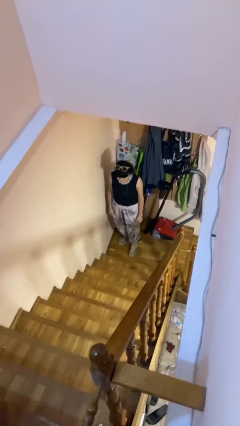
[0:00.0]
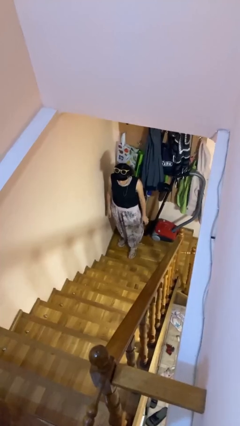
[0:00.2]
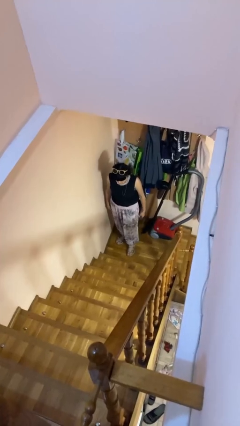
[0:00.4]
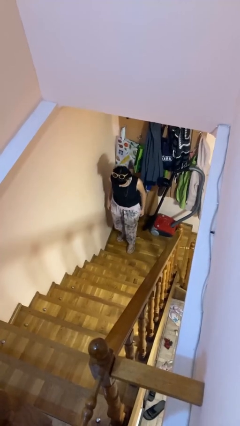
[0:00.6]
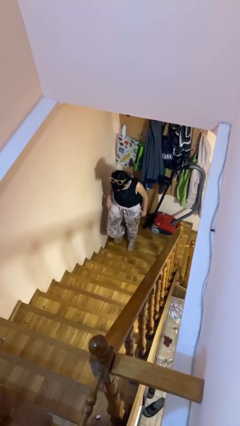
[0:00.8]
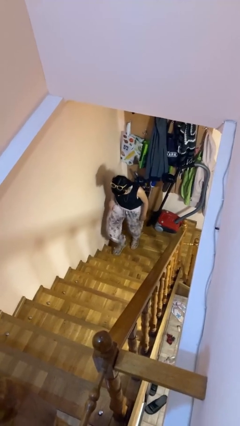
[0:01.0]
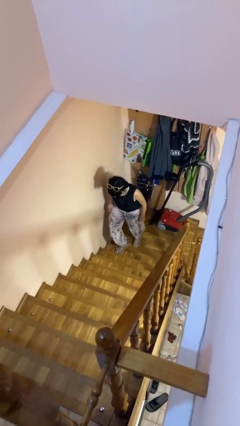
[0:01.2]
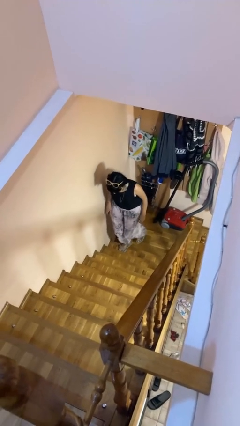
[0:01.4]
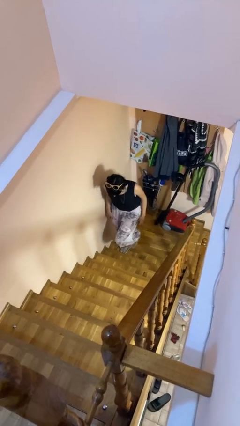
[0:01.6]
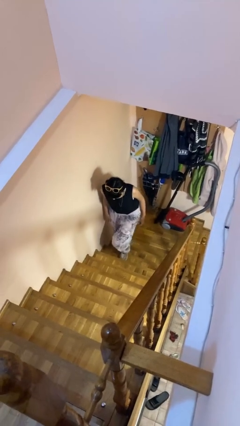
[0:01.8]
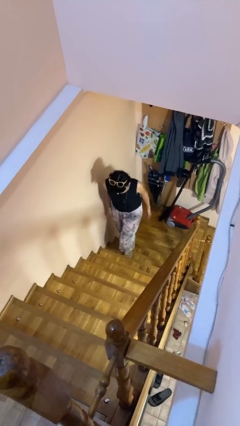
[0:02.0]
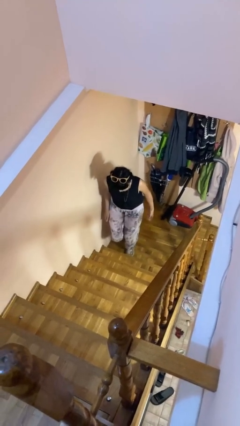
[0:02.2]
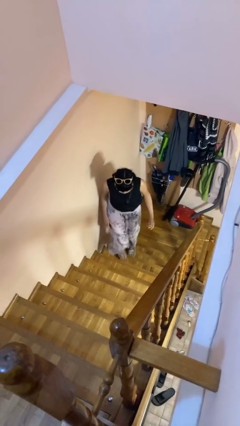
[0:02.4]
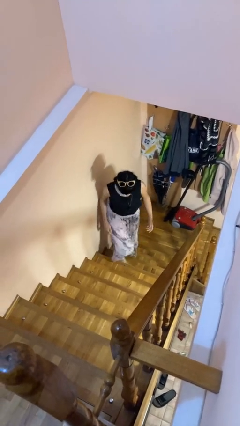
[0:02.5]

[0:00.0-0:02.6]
person climbs up stairs

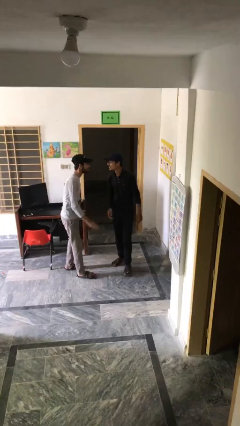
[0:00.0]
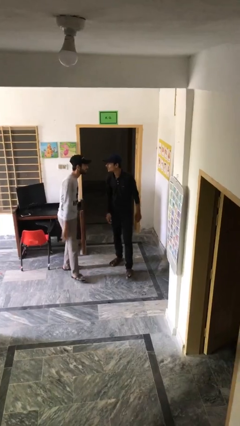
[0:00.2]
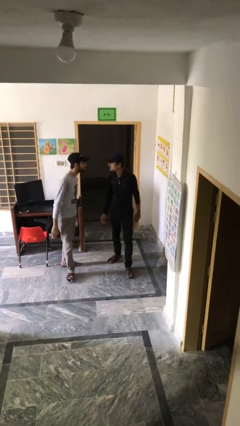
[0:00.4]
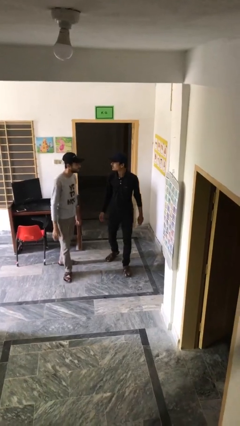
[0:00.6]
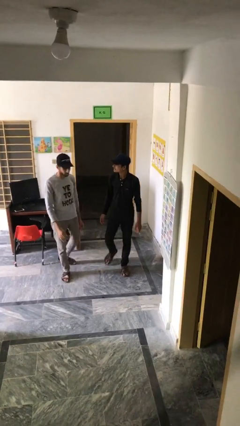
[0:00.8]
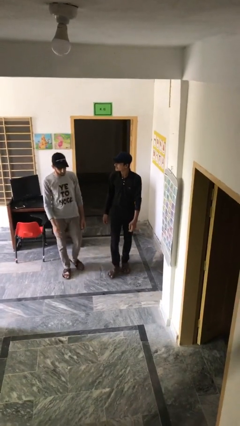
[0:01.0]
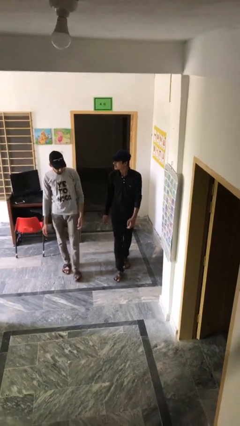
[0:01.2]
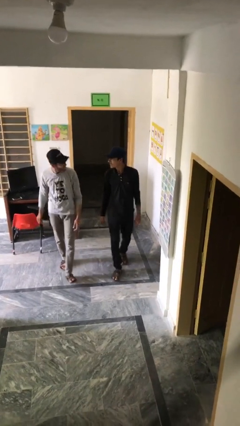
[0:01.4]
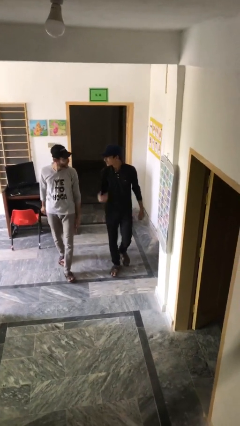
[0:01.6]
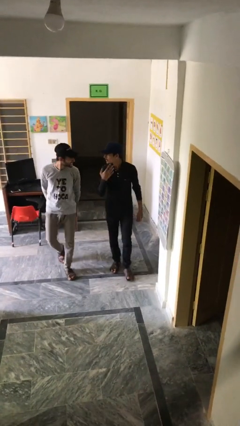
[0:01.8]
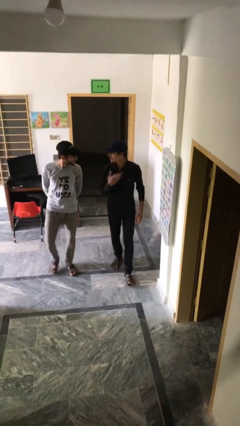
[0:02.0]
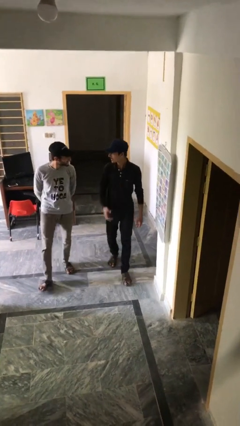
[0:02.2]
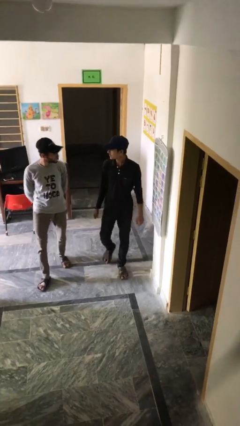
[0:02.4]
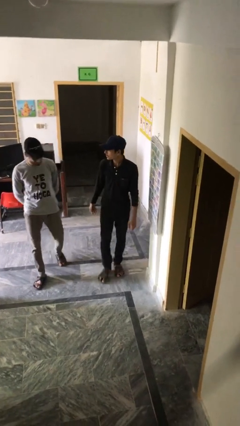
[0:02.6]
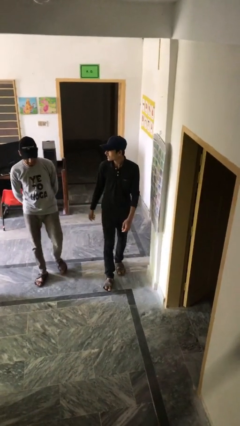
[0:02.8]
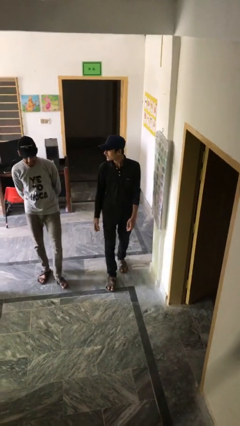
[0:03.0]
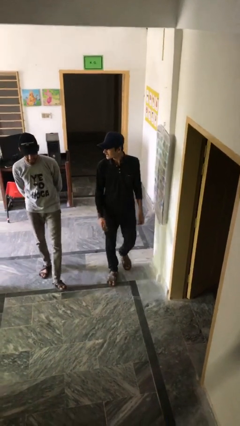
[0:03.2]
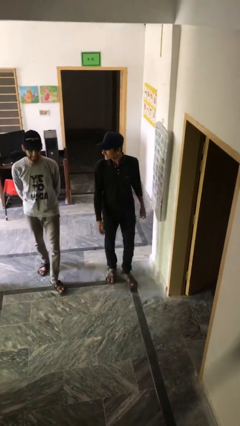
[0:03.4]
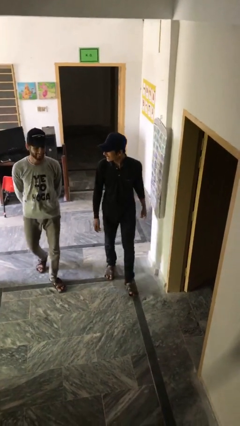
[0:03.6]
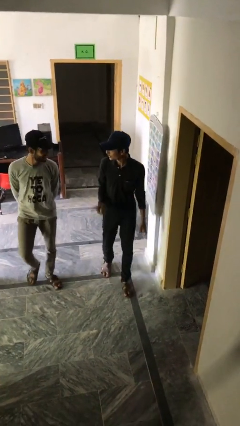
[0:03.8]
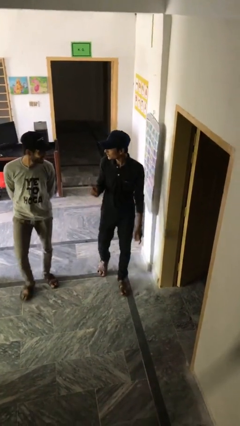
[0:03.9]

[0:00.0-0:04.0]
person talks to person

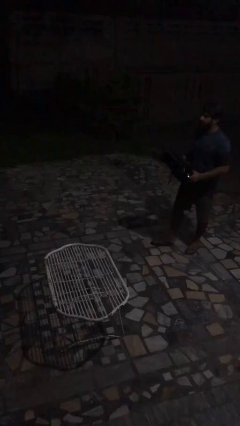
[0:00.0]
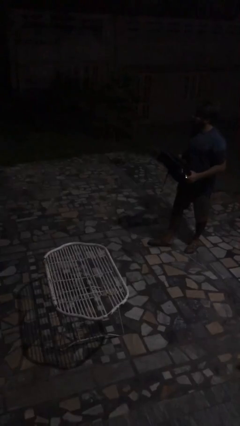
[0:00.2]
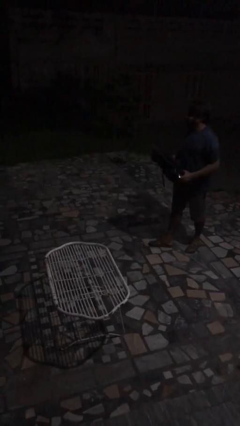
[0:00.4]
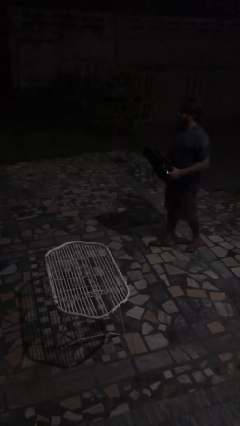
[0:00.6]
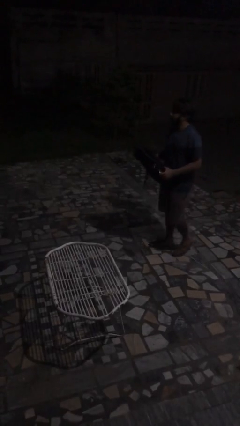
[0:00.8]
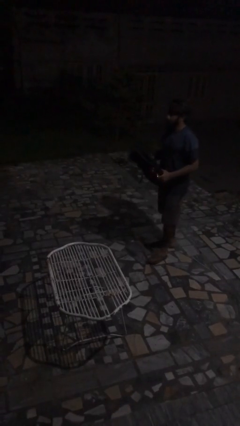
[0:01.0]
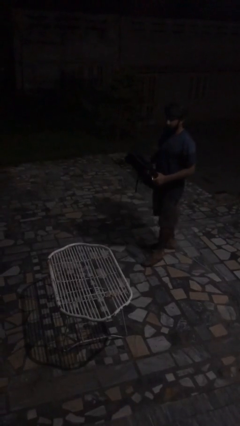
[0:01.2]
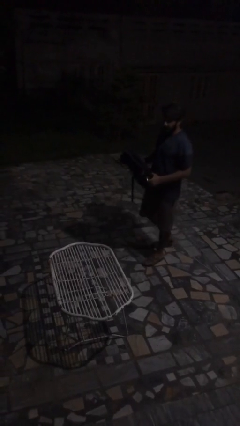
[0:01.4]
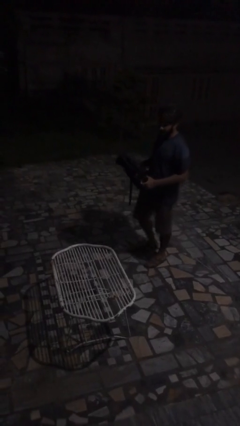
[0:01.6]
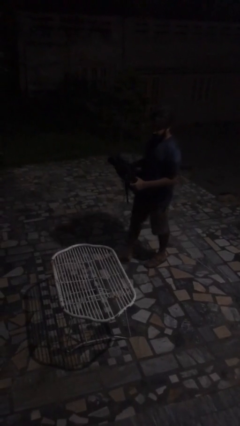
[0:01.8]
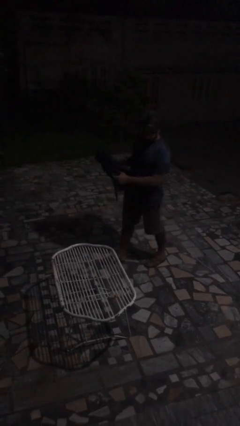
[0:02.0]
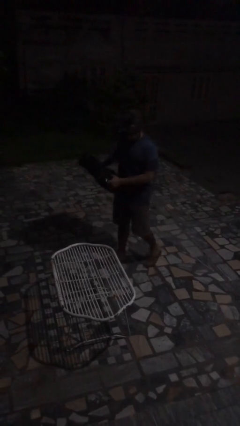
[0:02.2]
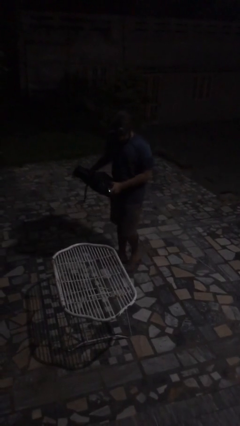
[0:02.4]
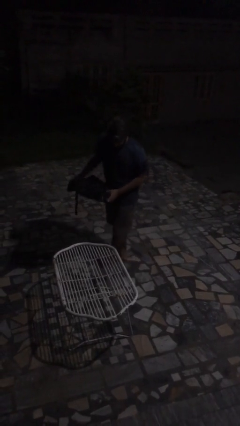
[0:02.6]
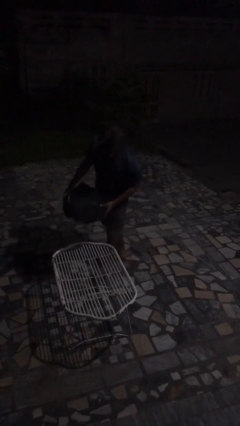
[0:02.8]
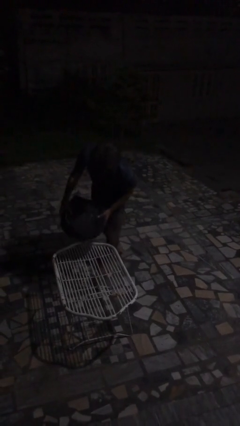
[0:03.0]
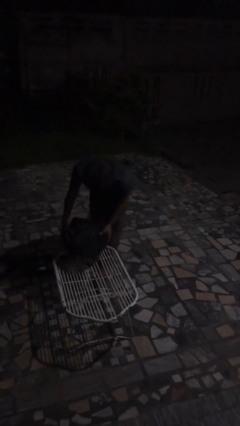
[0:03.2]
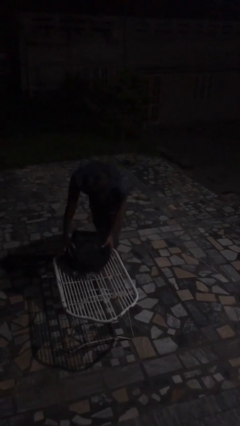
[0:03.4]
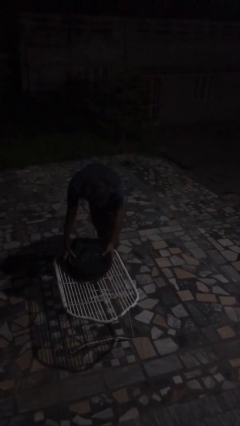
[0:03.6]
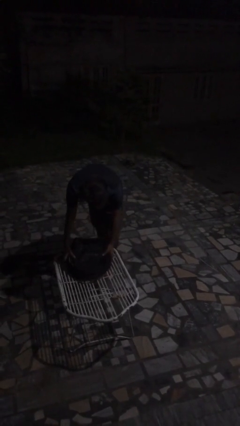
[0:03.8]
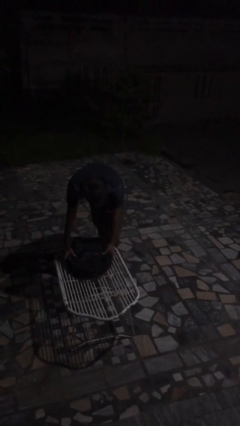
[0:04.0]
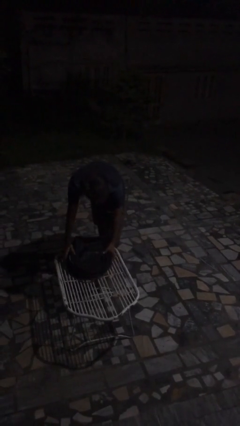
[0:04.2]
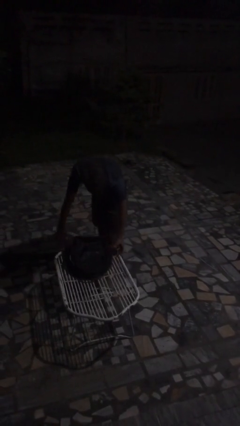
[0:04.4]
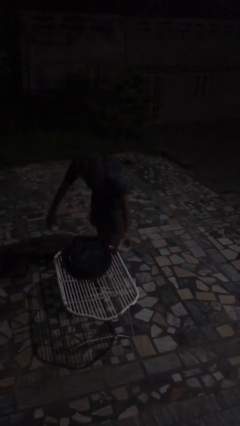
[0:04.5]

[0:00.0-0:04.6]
person puts down object on table

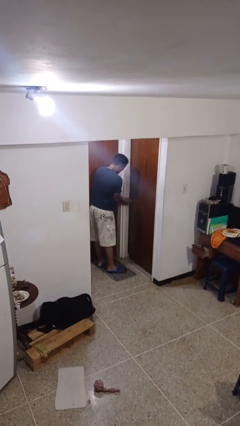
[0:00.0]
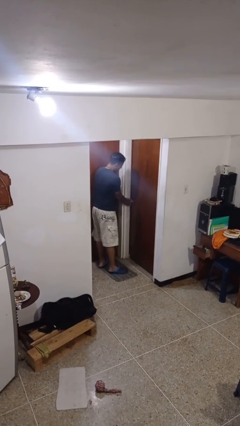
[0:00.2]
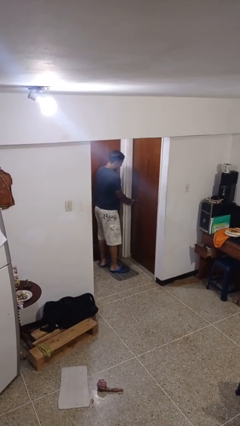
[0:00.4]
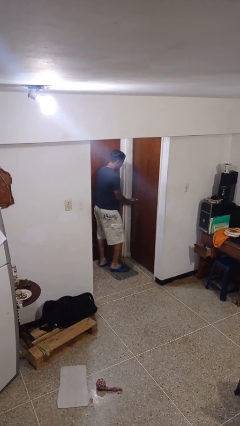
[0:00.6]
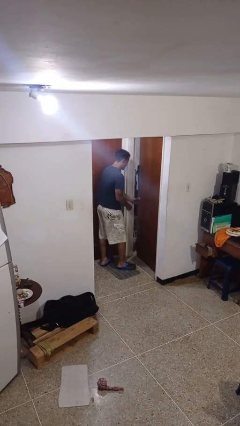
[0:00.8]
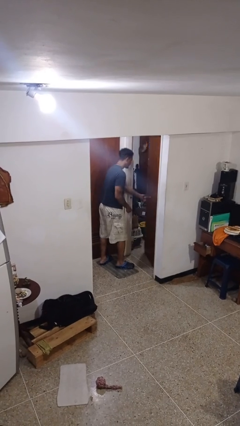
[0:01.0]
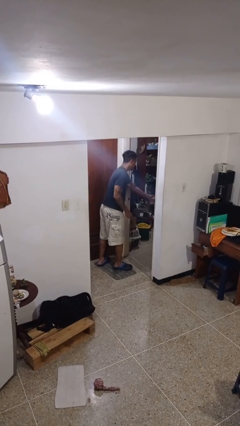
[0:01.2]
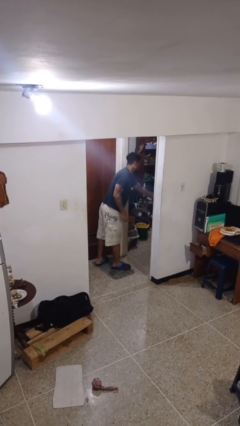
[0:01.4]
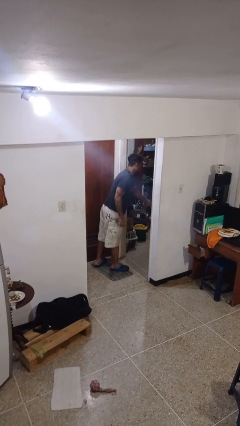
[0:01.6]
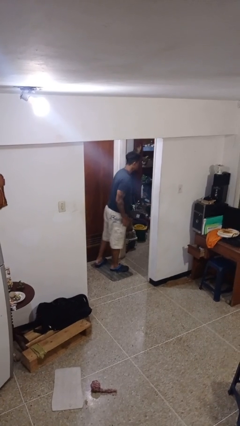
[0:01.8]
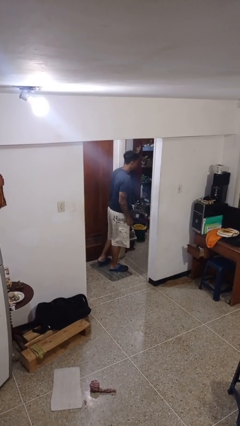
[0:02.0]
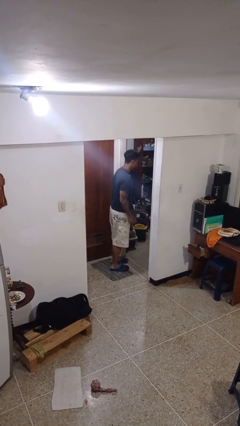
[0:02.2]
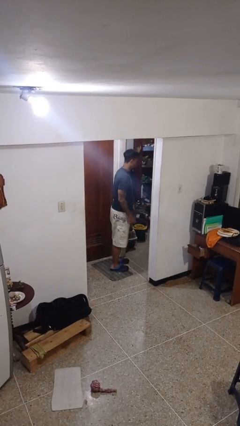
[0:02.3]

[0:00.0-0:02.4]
person opens facility door

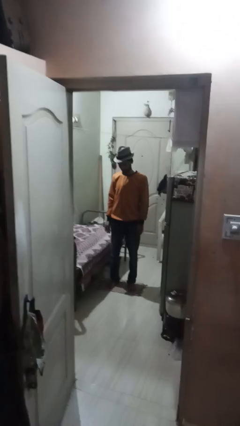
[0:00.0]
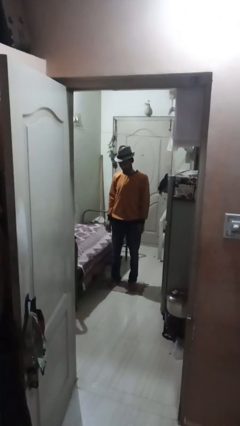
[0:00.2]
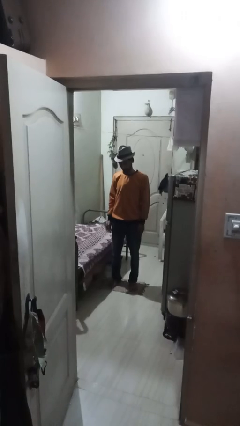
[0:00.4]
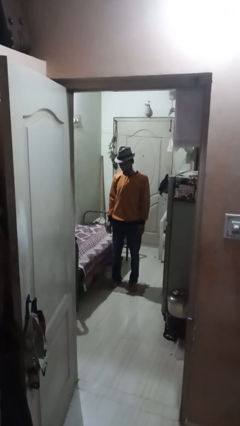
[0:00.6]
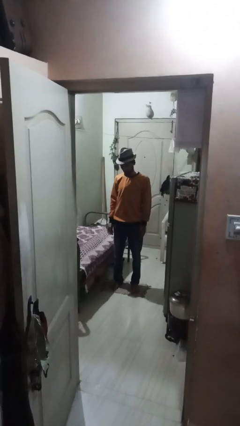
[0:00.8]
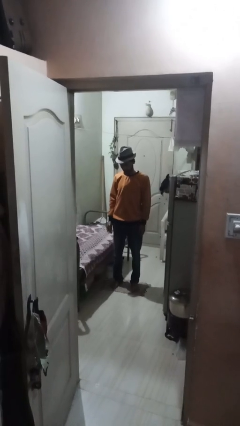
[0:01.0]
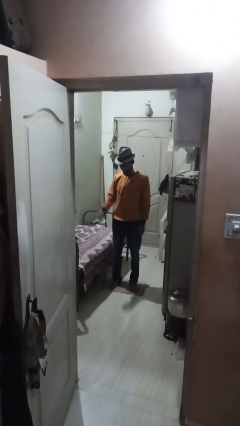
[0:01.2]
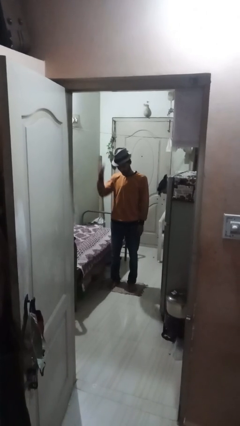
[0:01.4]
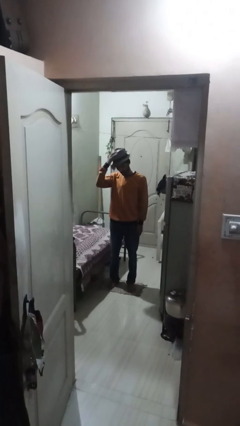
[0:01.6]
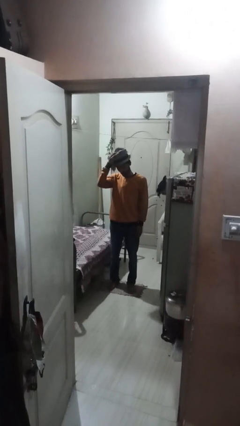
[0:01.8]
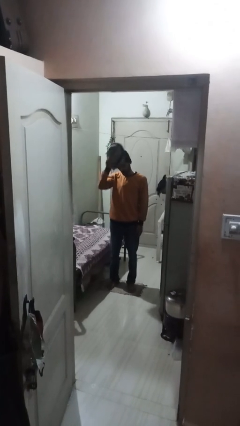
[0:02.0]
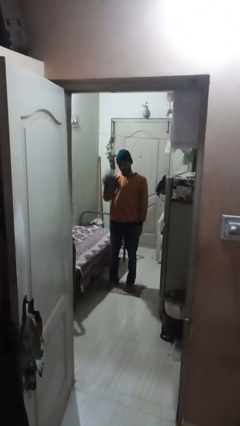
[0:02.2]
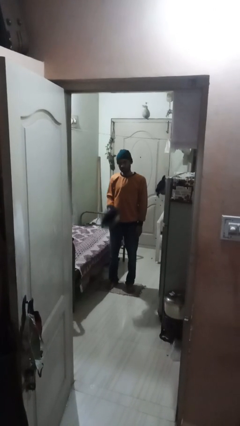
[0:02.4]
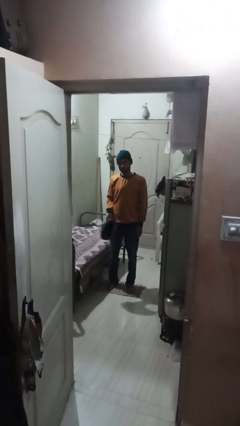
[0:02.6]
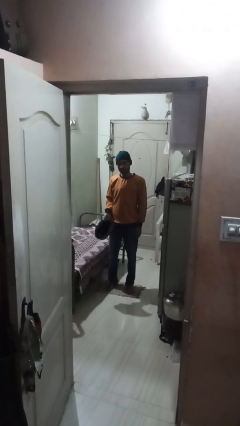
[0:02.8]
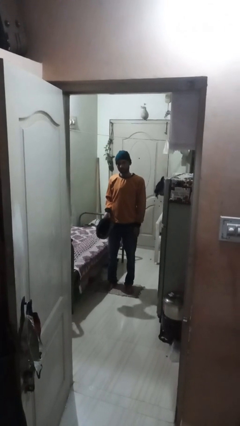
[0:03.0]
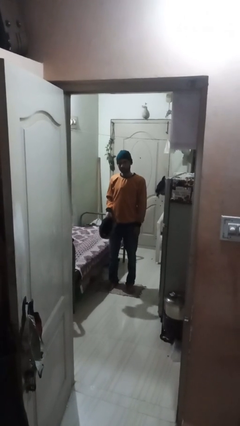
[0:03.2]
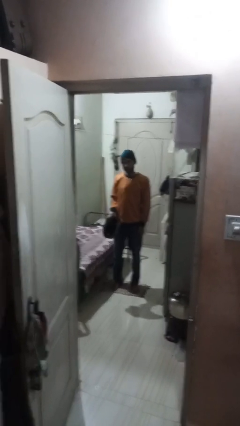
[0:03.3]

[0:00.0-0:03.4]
person takes off hat

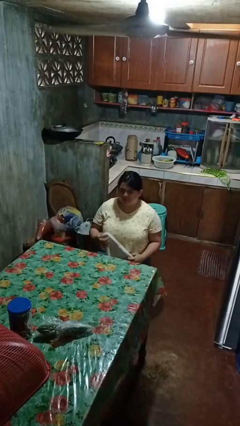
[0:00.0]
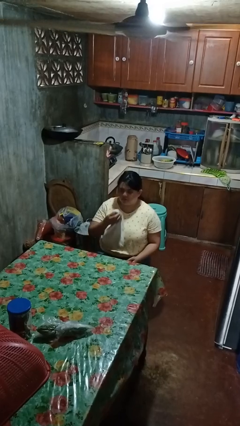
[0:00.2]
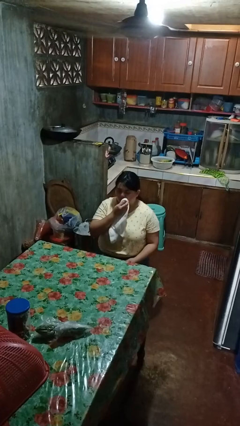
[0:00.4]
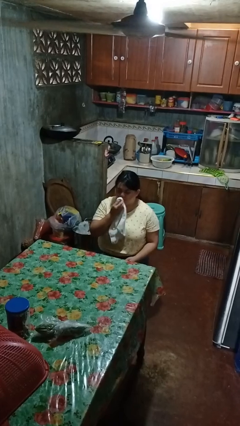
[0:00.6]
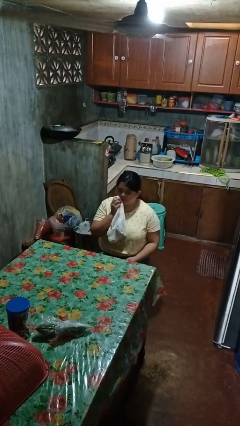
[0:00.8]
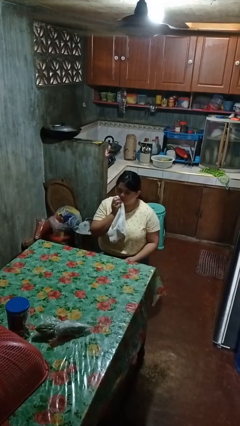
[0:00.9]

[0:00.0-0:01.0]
person wipes mouth with napkin
